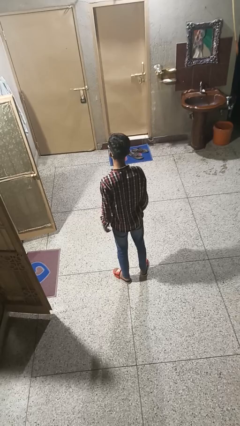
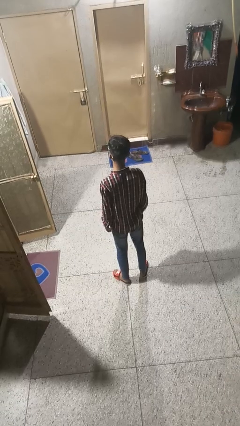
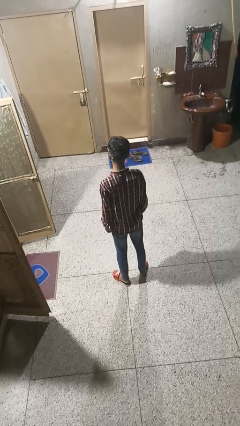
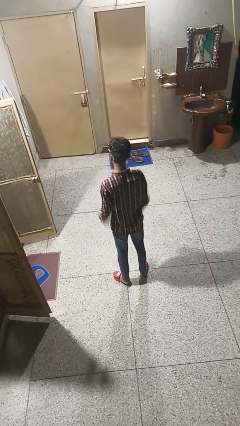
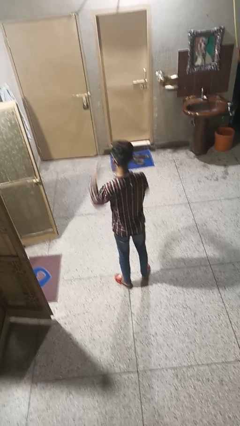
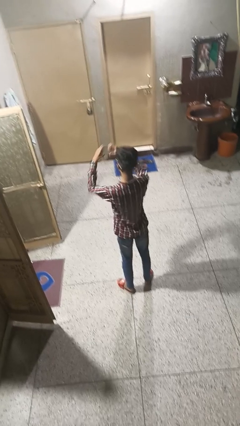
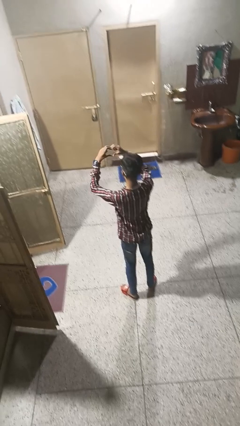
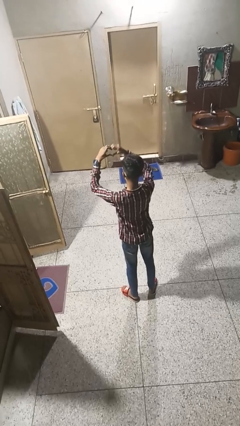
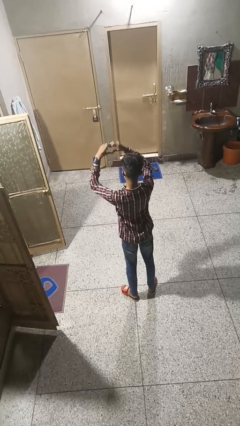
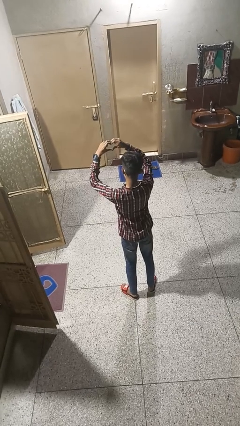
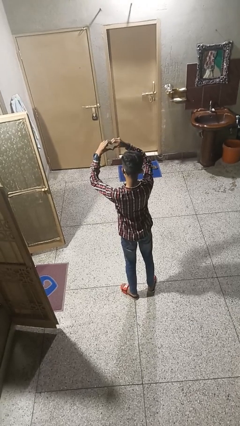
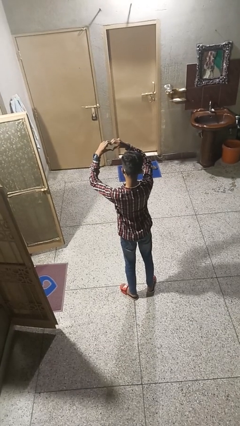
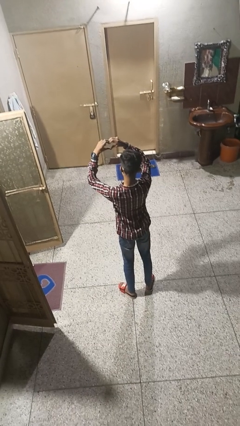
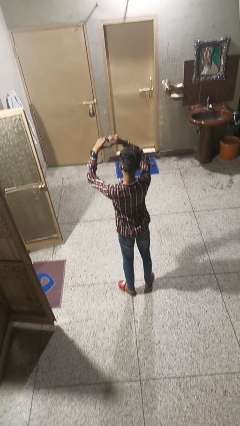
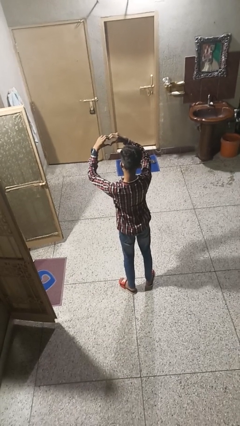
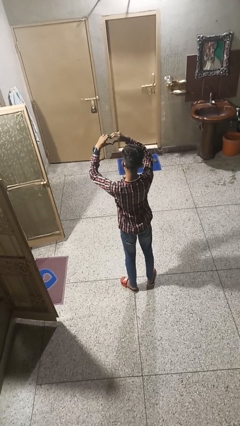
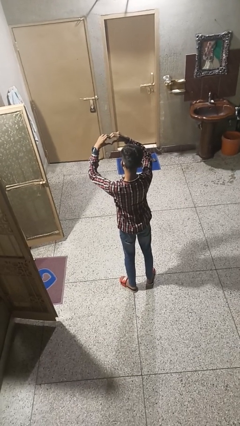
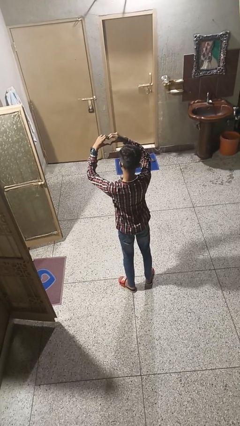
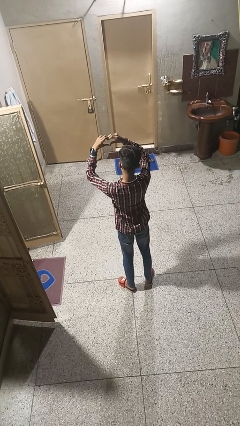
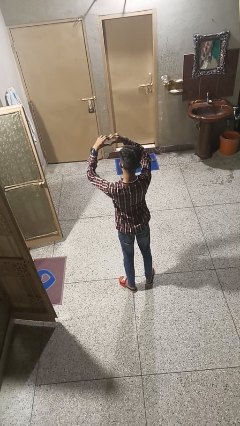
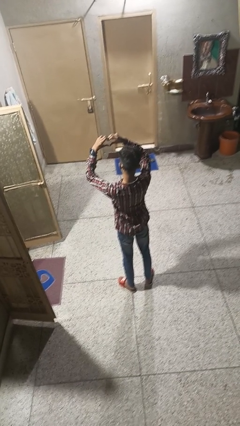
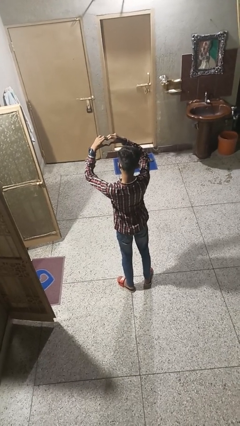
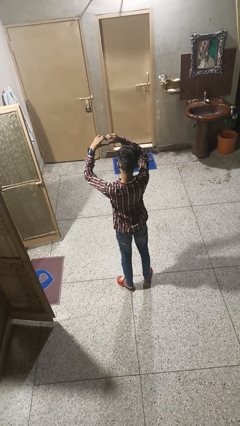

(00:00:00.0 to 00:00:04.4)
person gestures heart

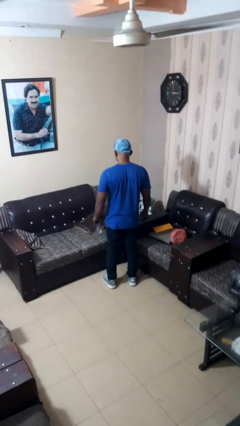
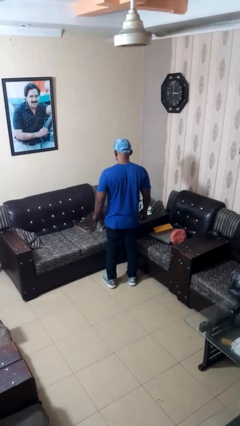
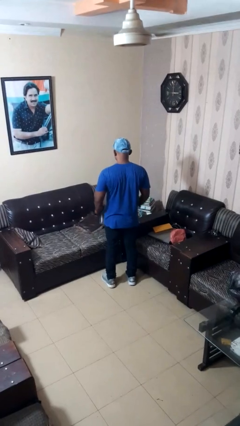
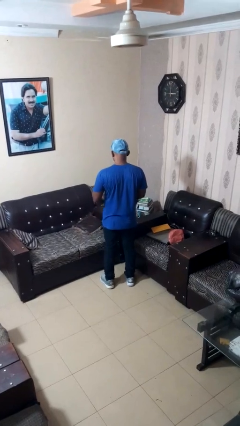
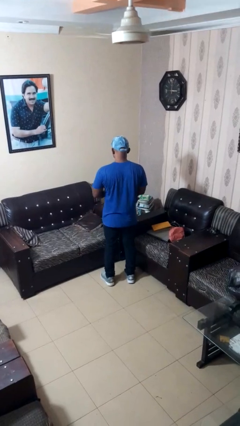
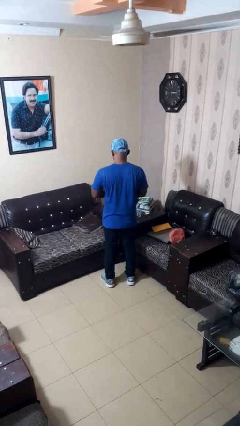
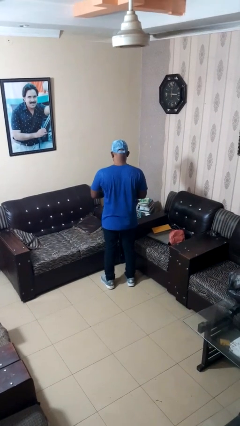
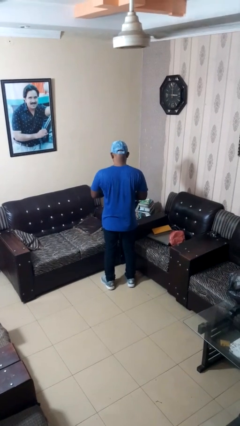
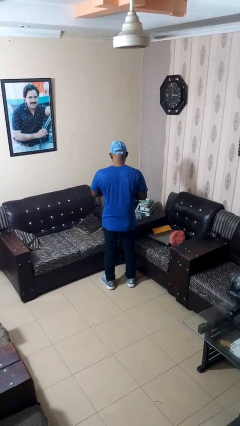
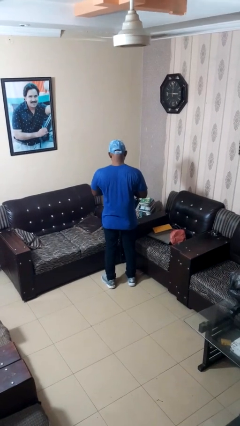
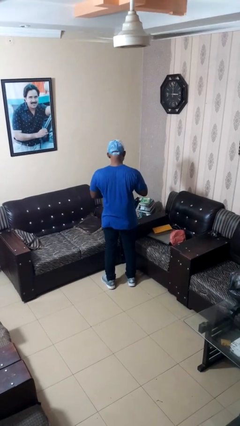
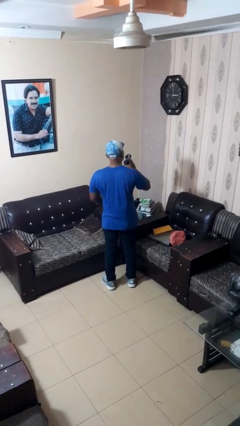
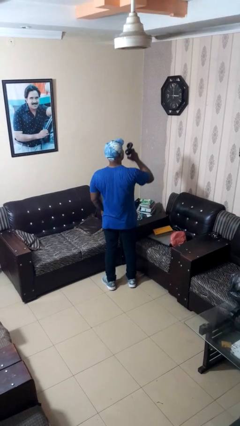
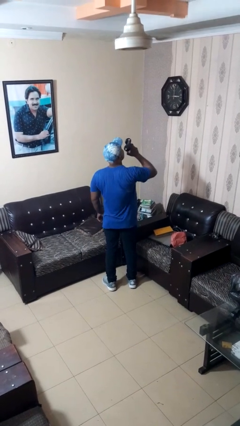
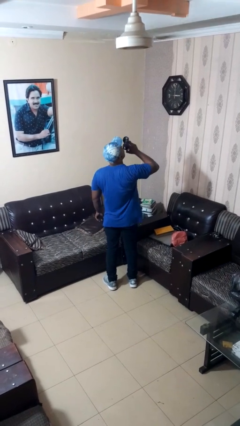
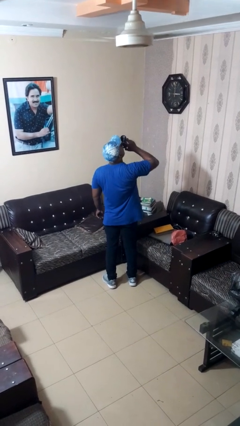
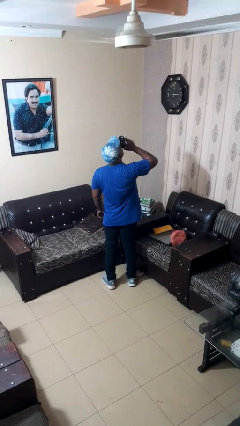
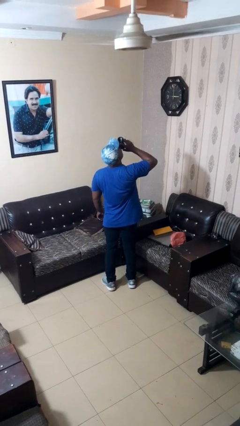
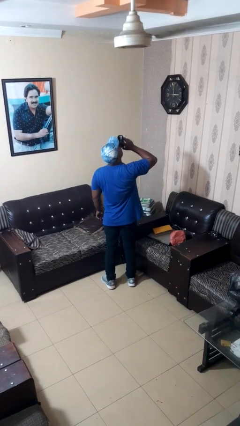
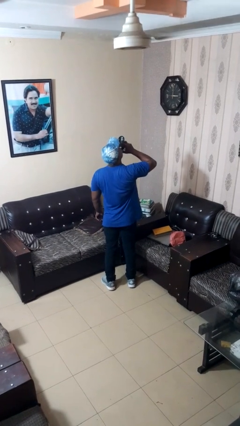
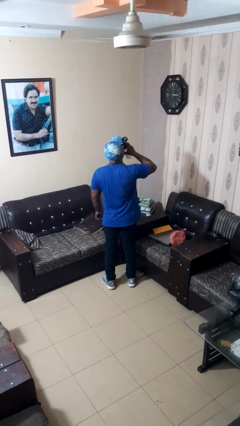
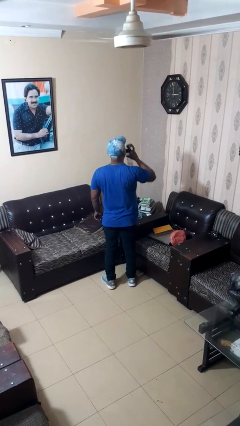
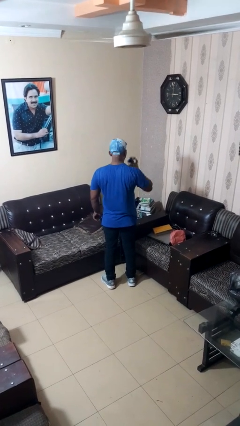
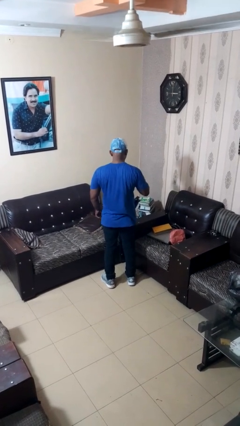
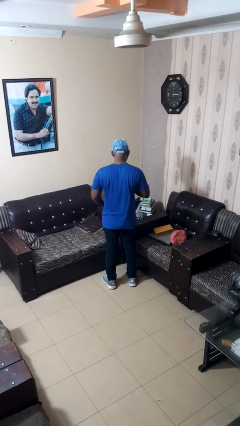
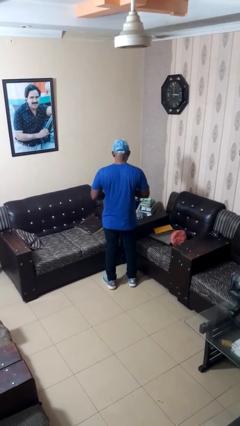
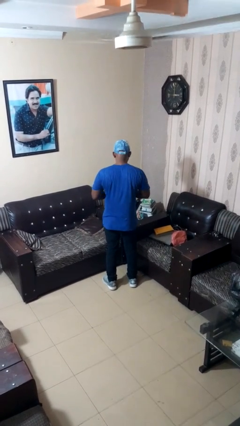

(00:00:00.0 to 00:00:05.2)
person drinks from bottle

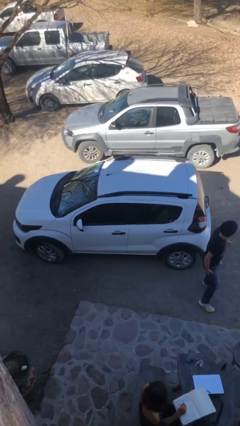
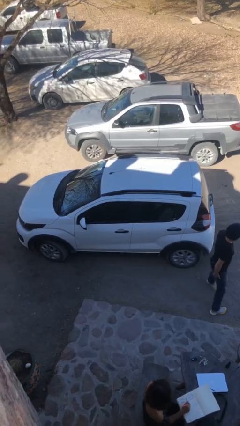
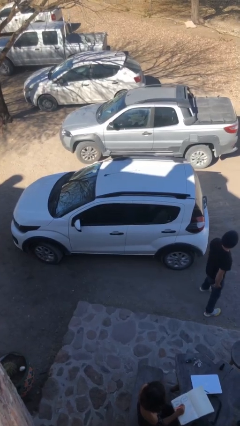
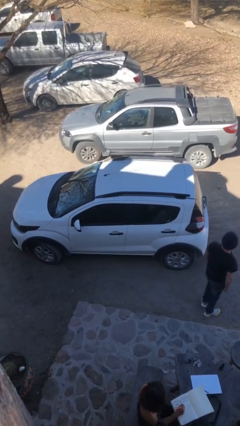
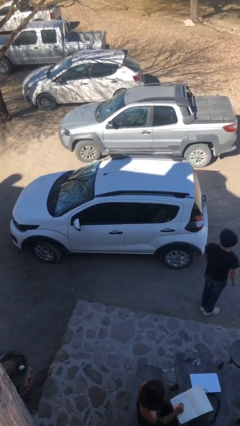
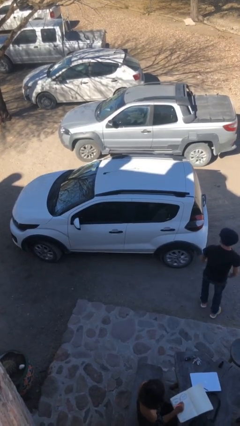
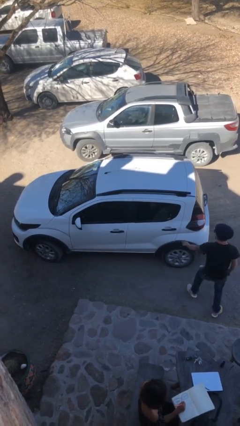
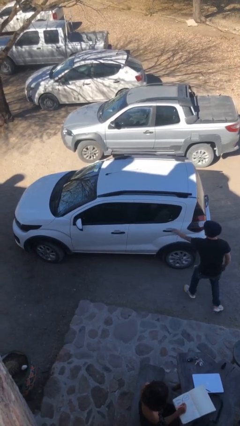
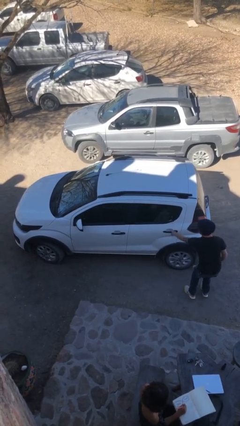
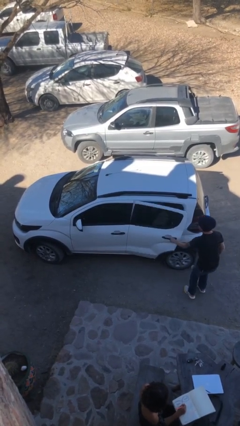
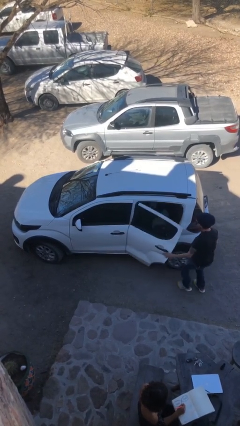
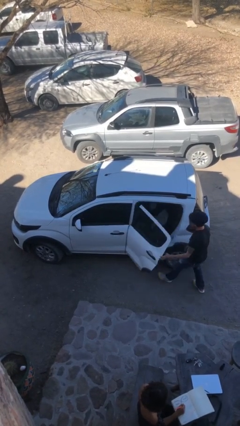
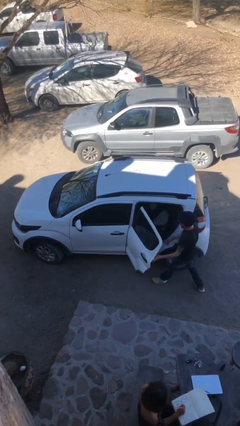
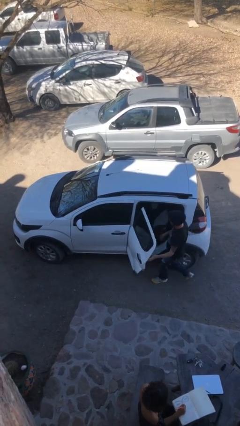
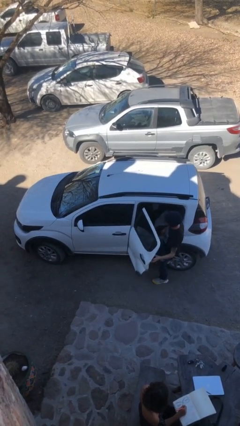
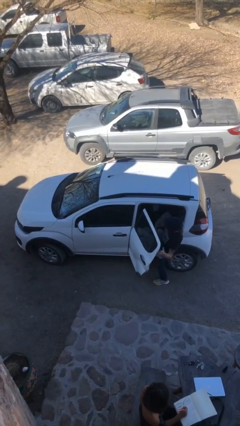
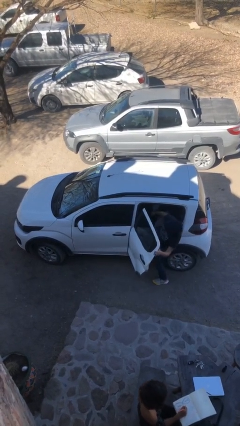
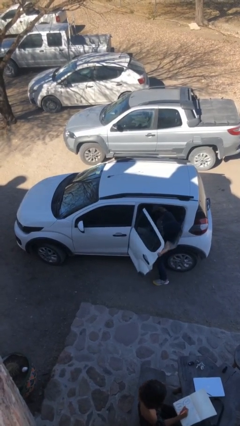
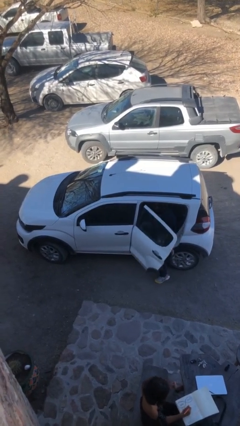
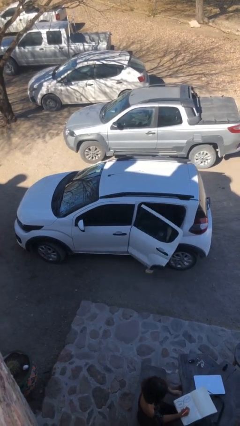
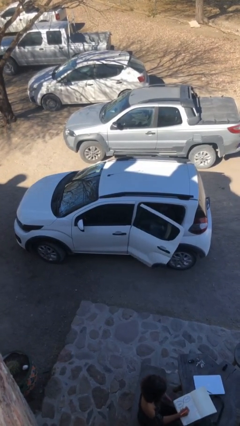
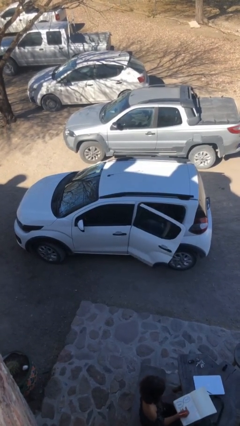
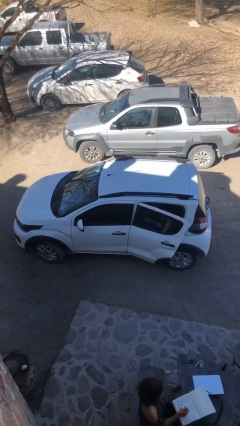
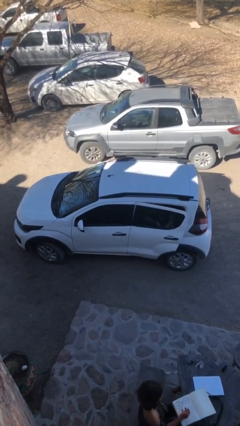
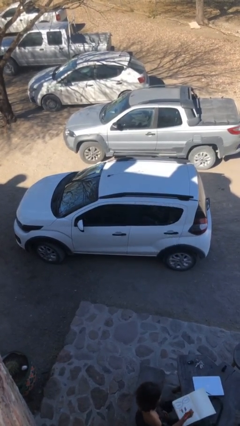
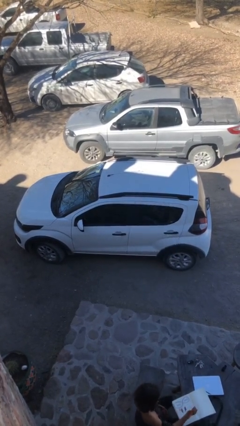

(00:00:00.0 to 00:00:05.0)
car picks up person

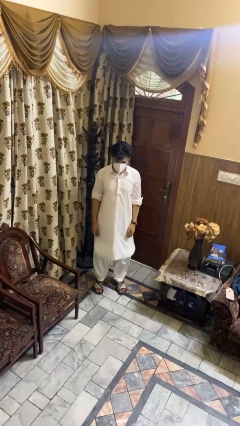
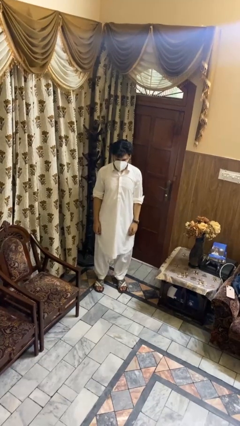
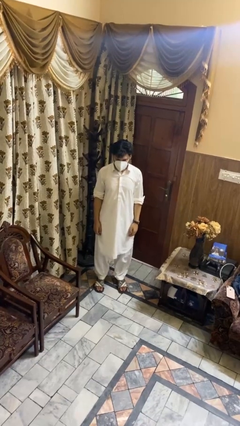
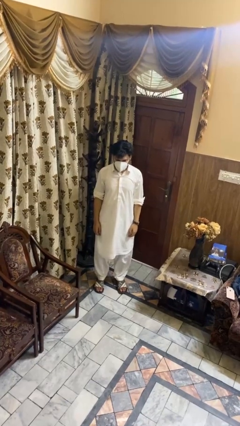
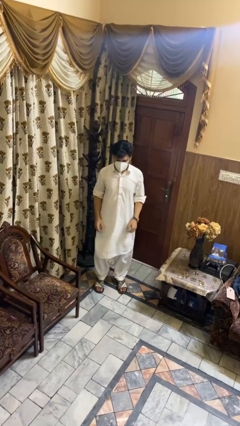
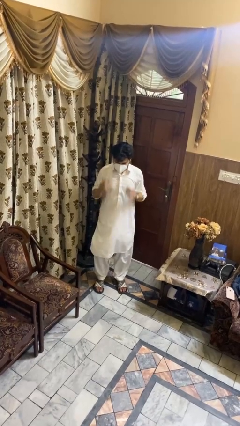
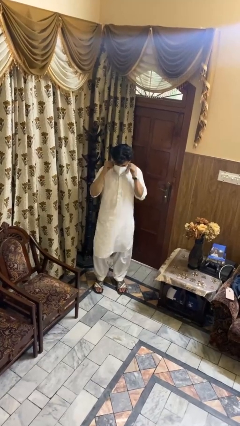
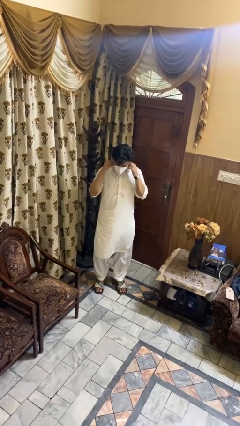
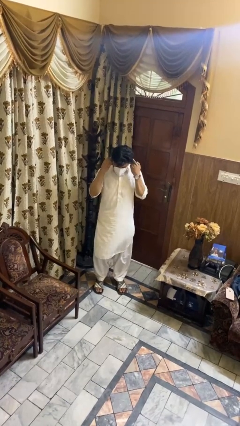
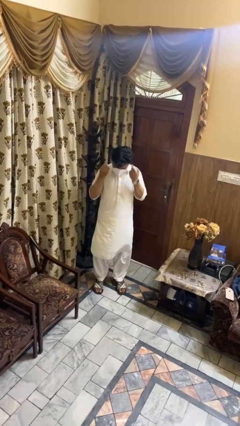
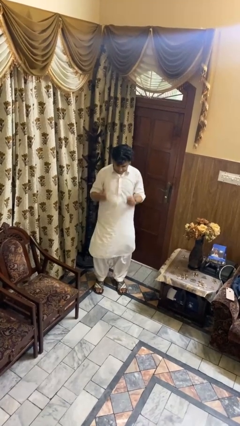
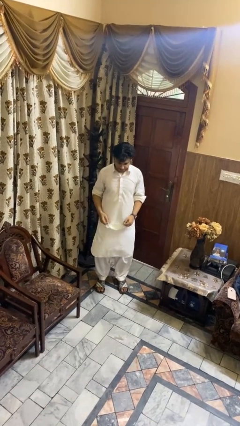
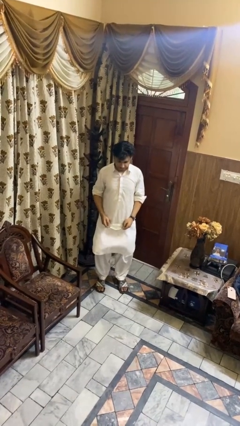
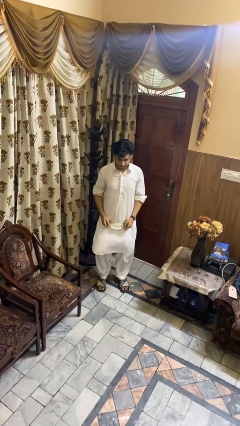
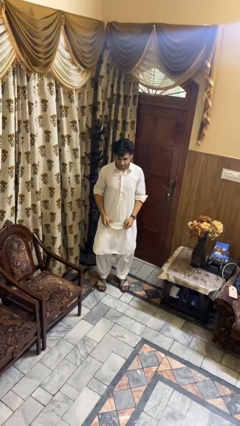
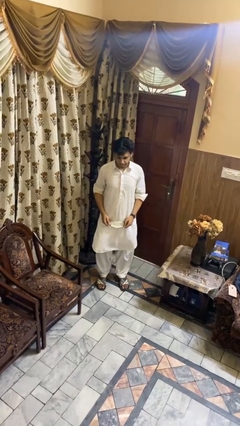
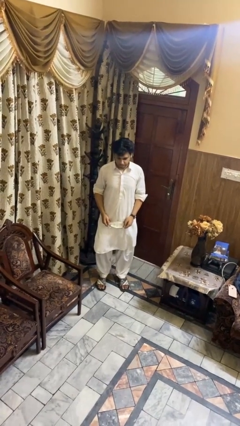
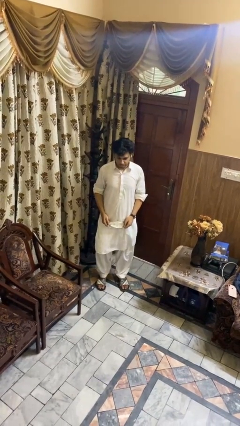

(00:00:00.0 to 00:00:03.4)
person takes off facemask
